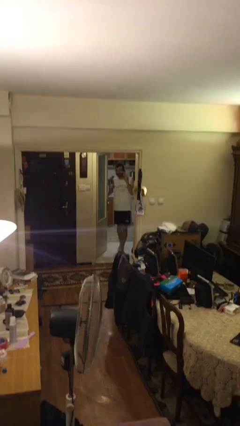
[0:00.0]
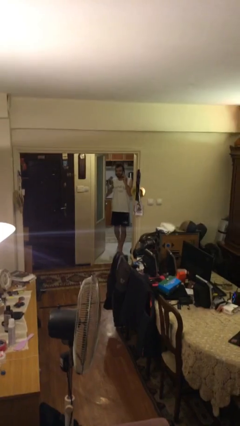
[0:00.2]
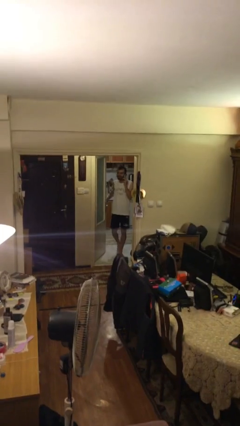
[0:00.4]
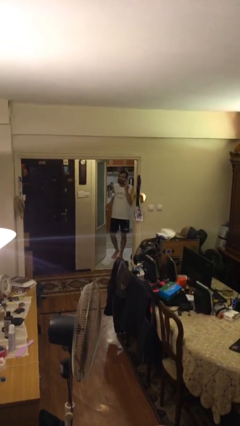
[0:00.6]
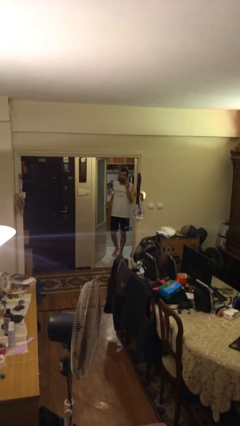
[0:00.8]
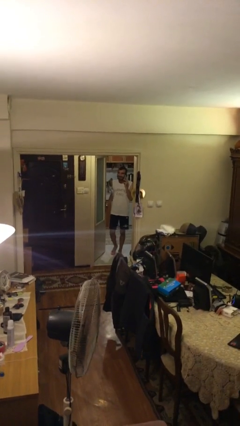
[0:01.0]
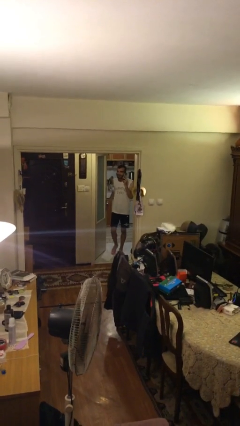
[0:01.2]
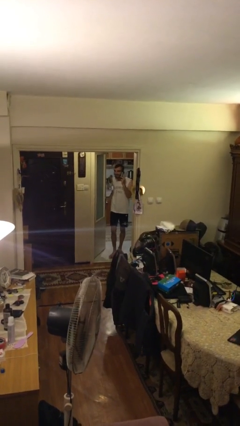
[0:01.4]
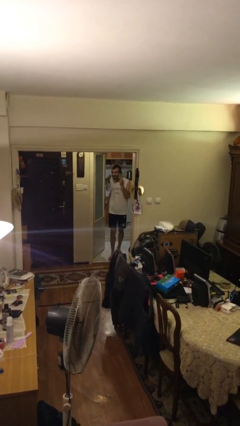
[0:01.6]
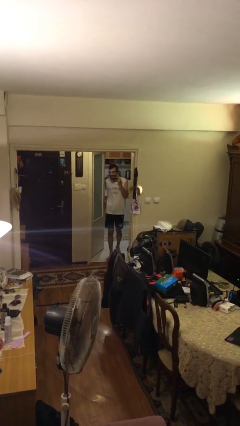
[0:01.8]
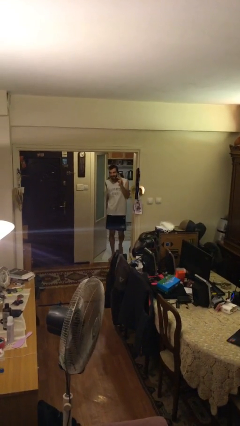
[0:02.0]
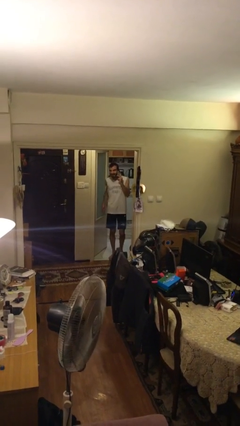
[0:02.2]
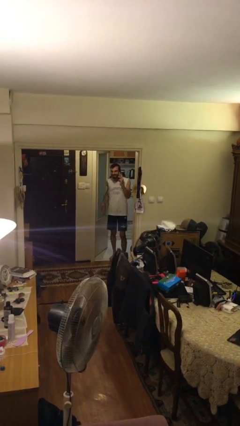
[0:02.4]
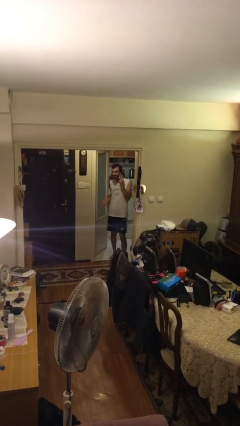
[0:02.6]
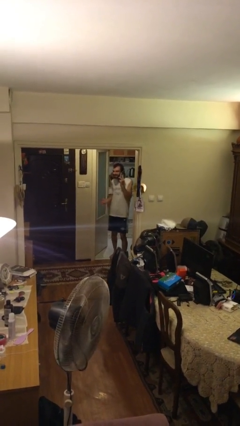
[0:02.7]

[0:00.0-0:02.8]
person enters scene through structure

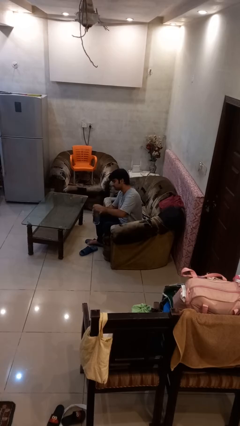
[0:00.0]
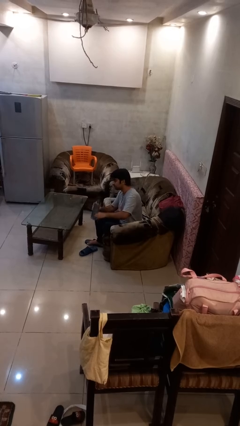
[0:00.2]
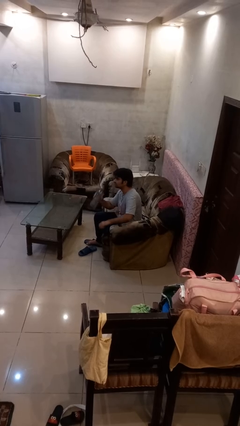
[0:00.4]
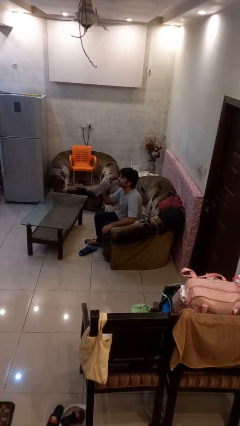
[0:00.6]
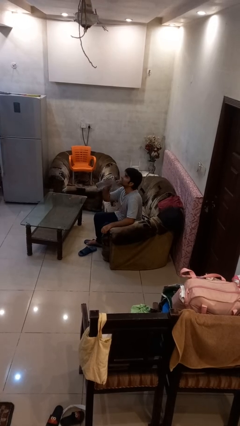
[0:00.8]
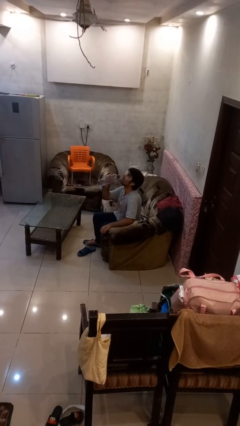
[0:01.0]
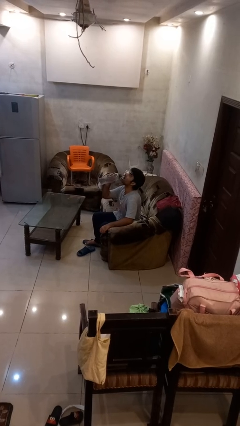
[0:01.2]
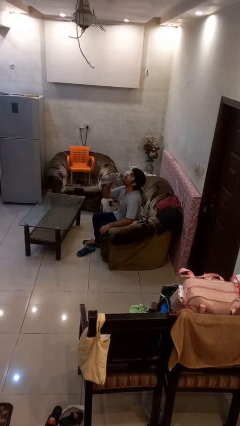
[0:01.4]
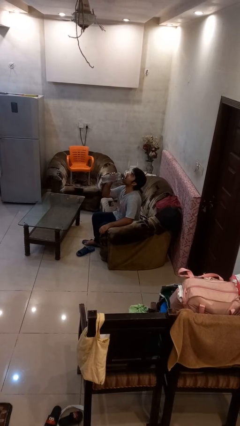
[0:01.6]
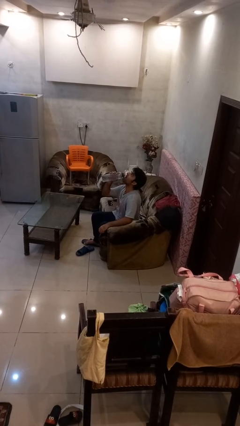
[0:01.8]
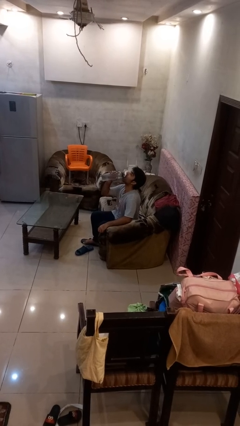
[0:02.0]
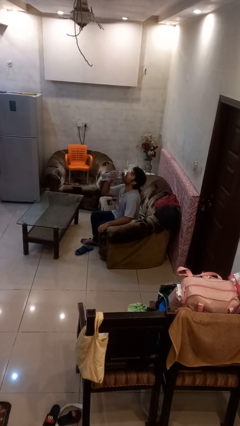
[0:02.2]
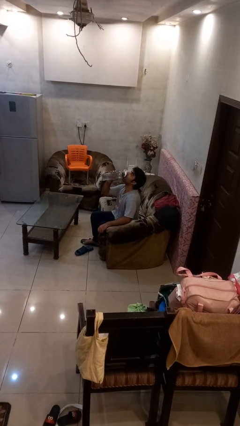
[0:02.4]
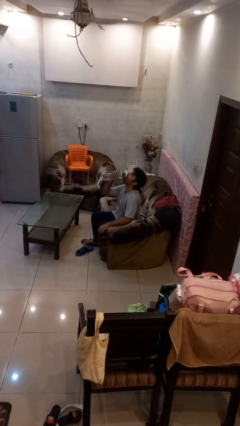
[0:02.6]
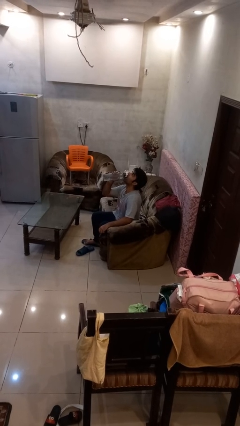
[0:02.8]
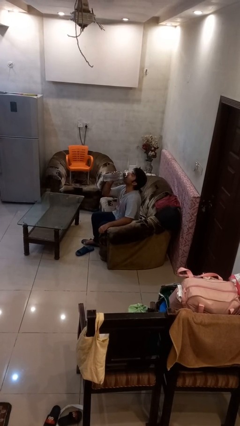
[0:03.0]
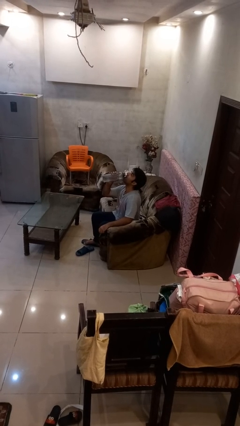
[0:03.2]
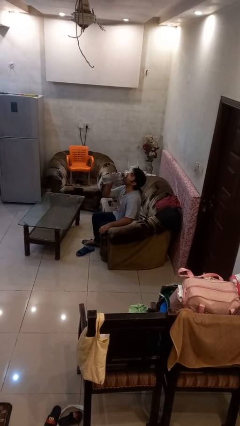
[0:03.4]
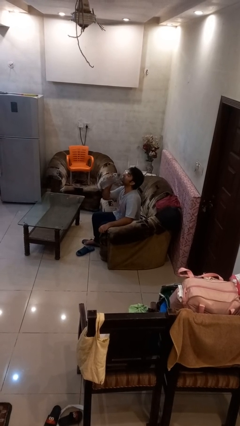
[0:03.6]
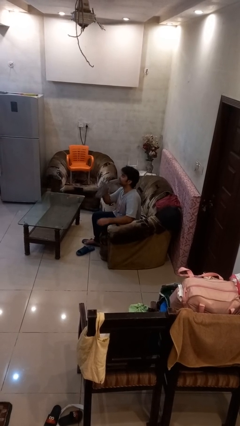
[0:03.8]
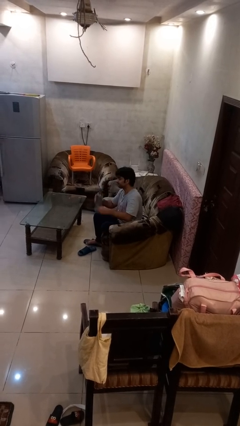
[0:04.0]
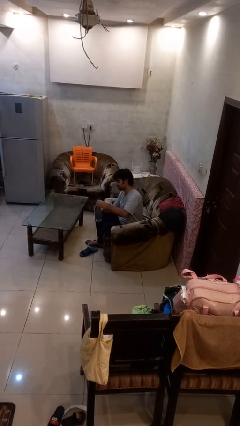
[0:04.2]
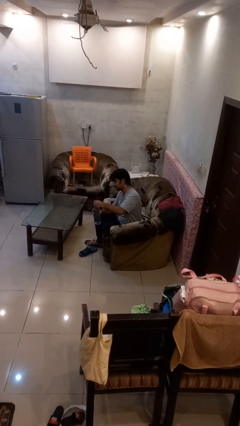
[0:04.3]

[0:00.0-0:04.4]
person drinks from bottle

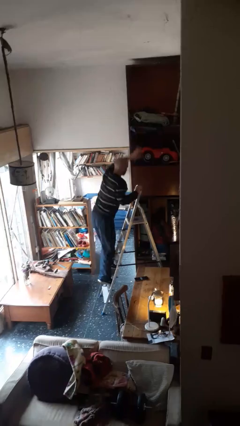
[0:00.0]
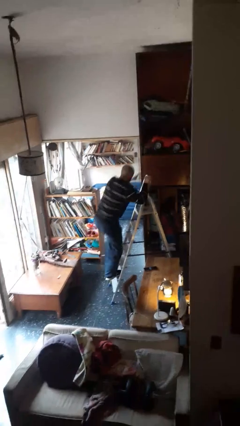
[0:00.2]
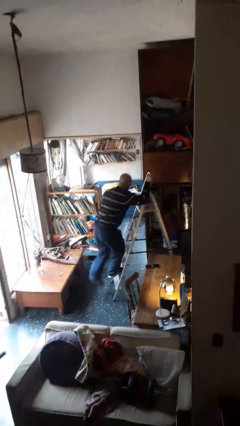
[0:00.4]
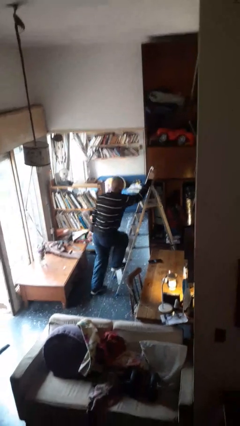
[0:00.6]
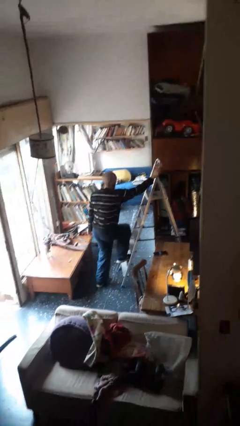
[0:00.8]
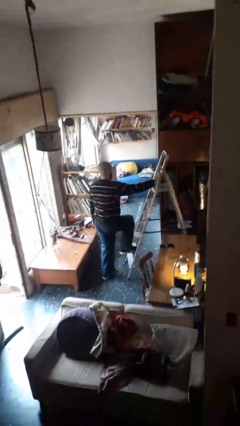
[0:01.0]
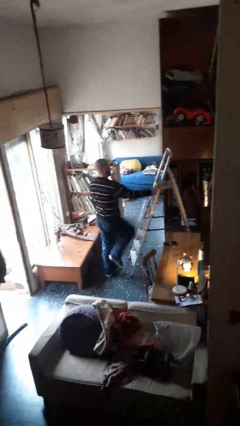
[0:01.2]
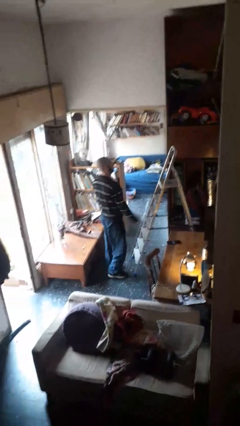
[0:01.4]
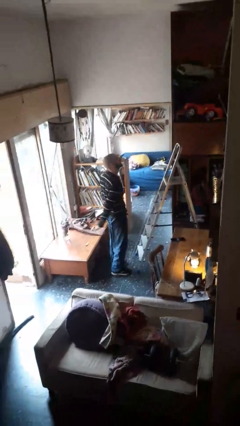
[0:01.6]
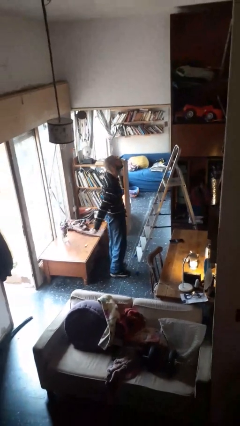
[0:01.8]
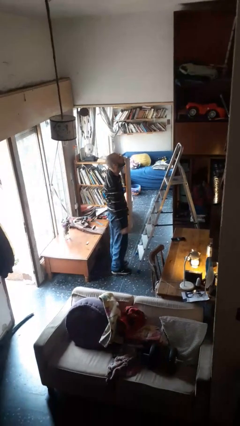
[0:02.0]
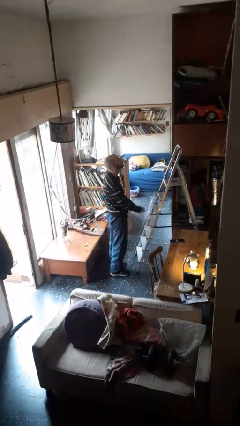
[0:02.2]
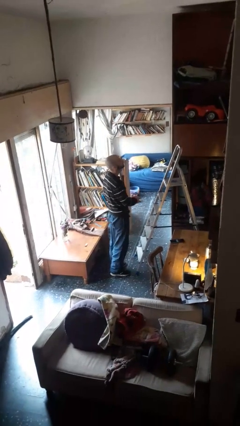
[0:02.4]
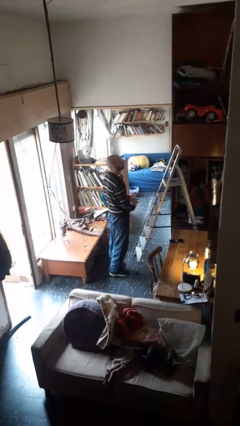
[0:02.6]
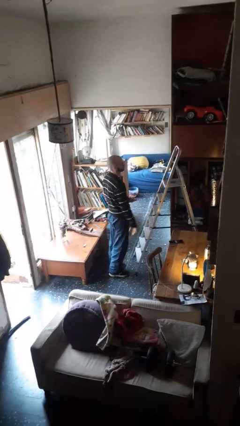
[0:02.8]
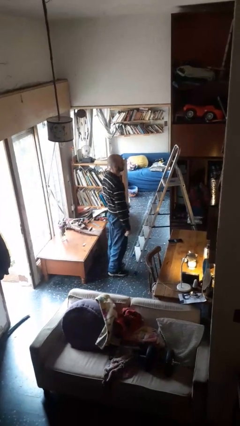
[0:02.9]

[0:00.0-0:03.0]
person climbs down ladder

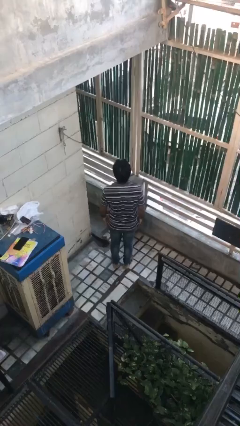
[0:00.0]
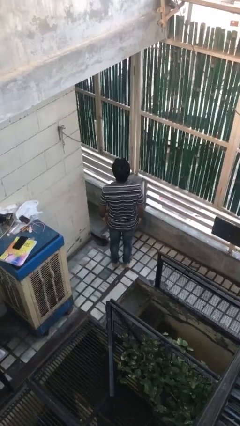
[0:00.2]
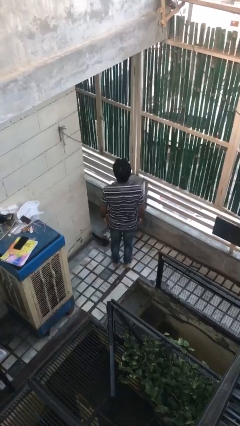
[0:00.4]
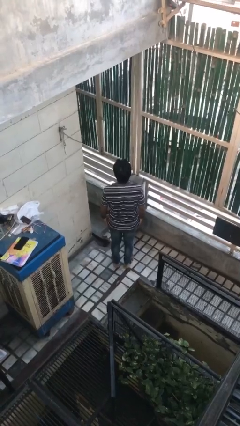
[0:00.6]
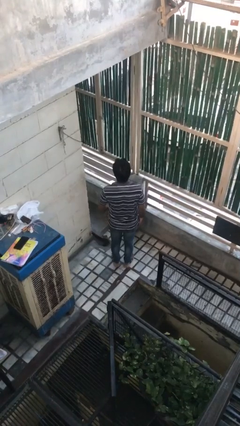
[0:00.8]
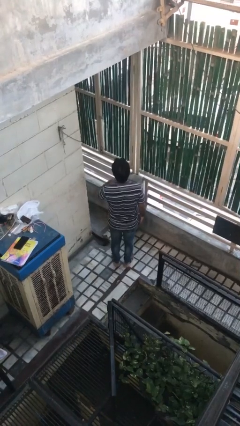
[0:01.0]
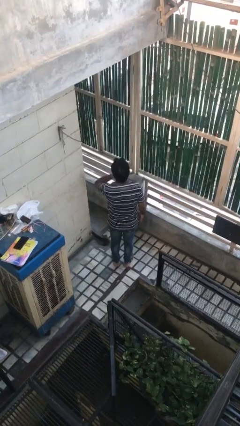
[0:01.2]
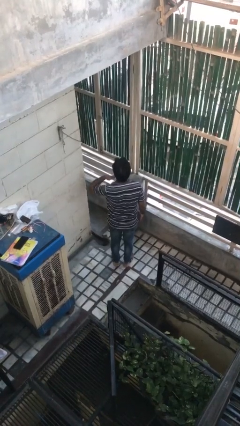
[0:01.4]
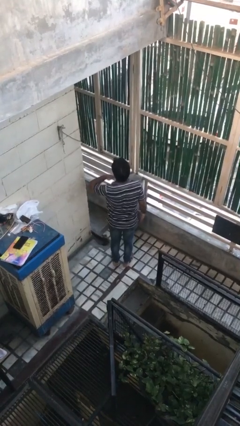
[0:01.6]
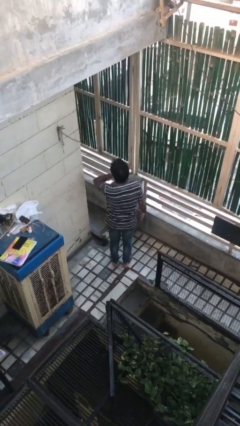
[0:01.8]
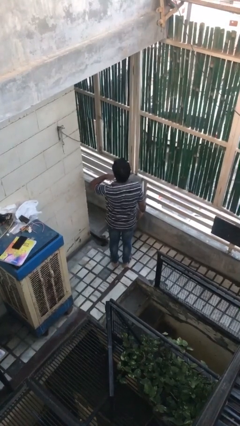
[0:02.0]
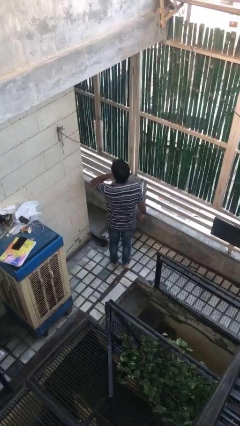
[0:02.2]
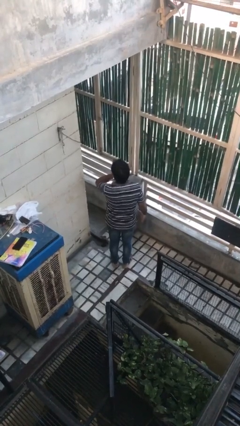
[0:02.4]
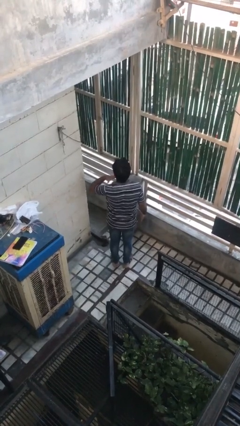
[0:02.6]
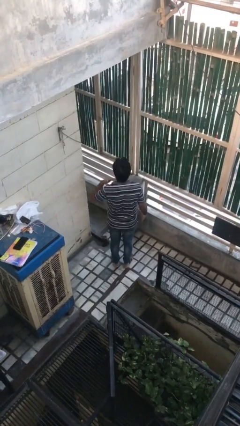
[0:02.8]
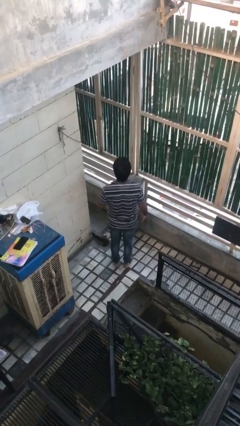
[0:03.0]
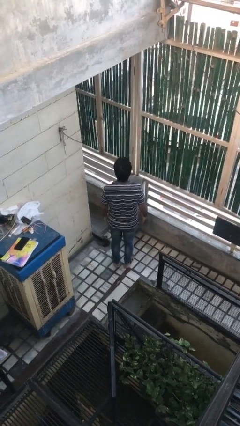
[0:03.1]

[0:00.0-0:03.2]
person gestures cut

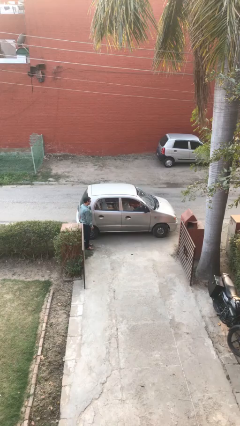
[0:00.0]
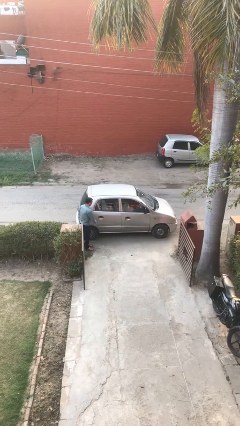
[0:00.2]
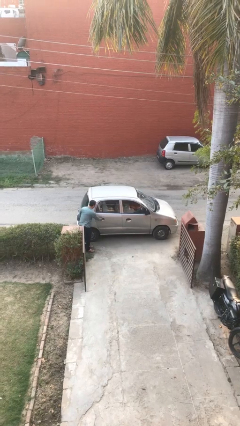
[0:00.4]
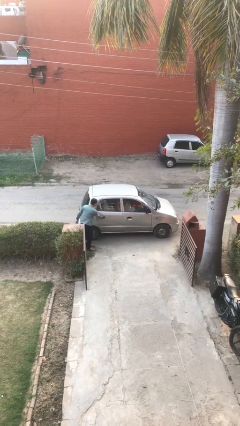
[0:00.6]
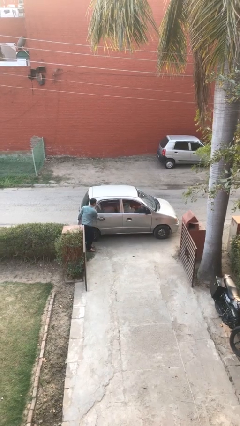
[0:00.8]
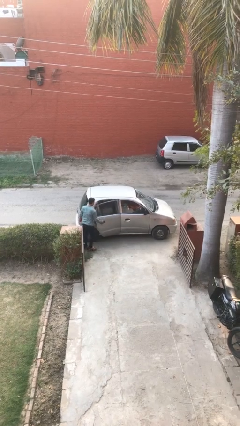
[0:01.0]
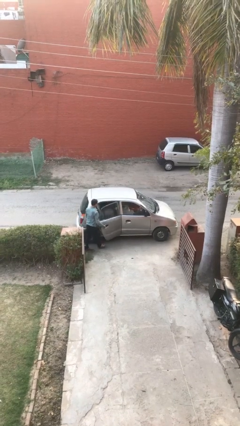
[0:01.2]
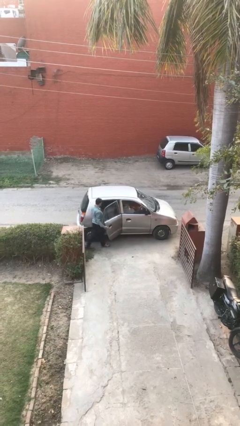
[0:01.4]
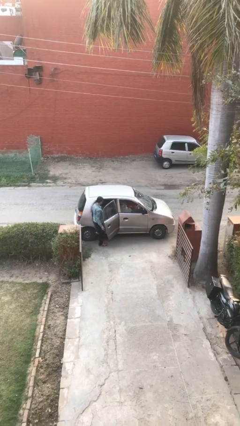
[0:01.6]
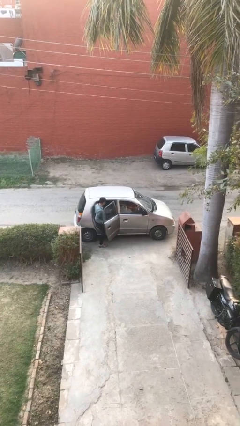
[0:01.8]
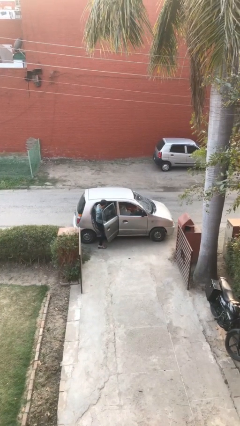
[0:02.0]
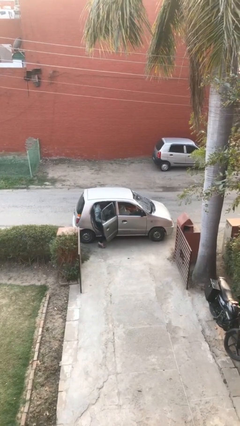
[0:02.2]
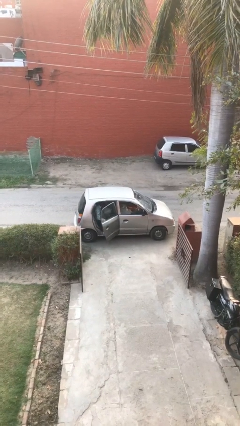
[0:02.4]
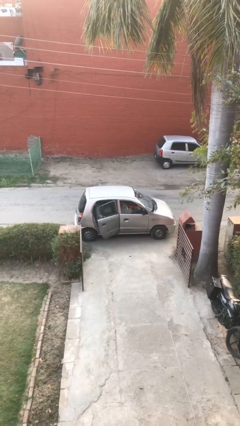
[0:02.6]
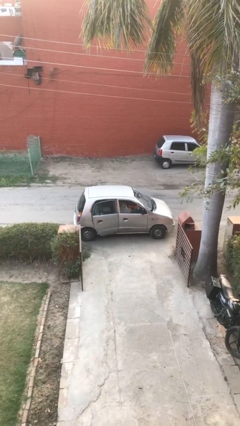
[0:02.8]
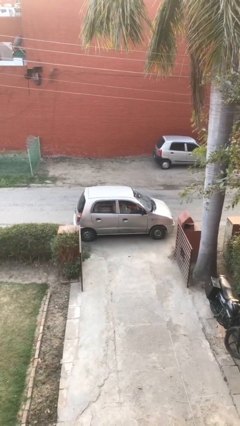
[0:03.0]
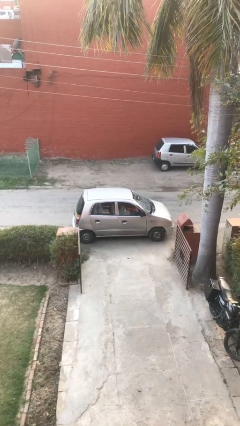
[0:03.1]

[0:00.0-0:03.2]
car picks up person

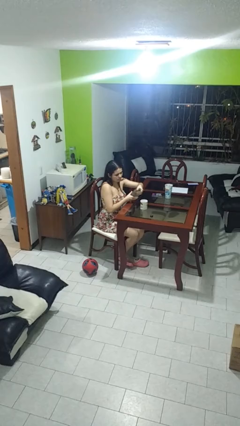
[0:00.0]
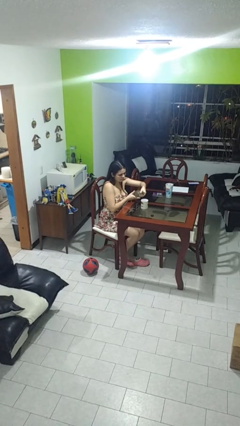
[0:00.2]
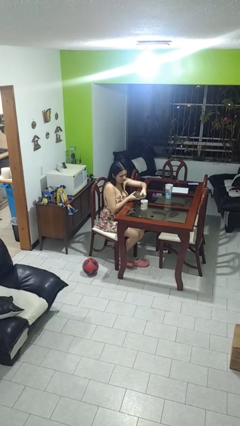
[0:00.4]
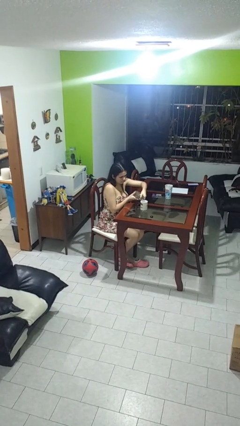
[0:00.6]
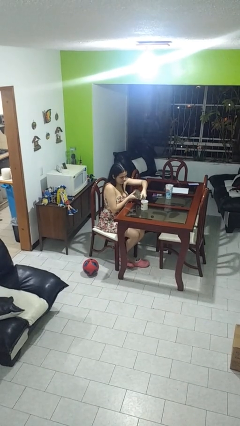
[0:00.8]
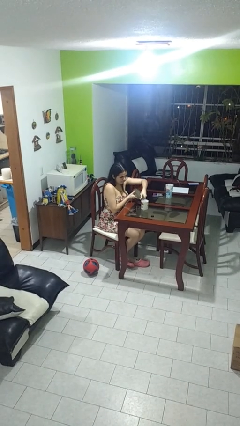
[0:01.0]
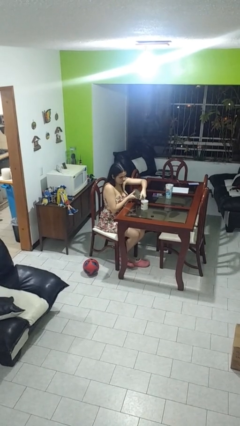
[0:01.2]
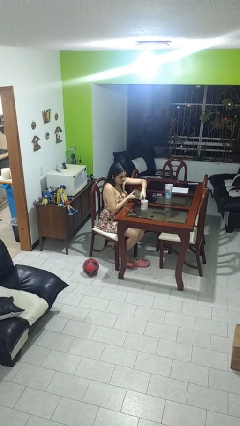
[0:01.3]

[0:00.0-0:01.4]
person pours liquid into cup
